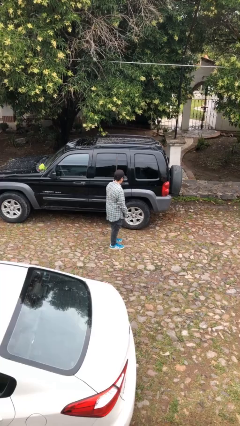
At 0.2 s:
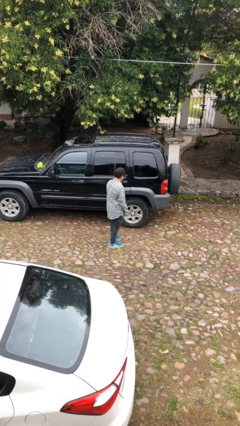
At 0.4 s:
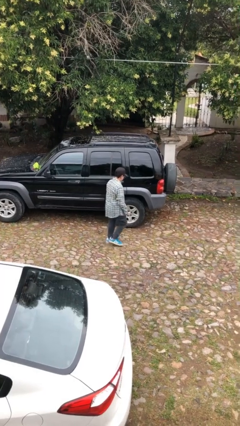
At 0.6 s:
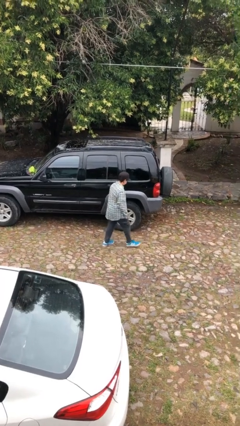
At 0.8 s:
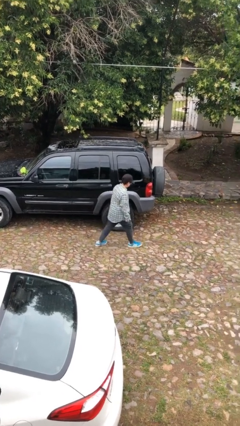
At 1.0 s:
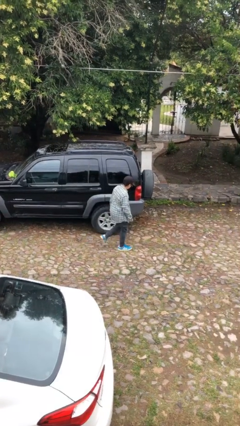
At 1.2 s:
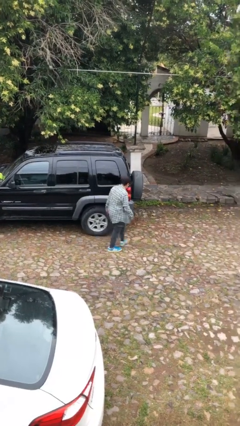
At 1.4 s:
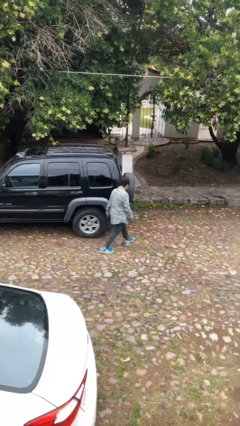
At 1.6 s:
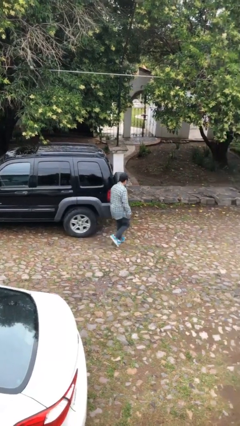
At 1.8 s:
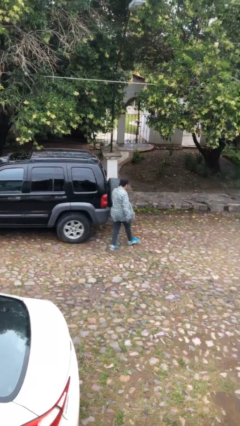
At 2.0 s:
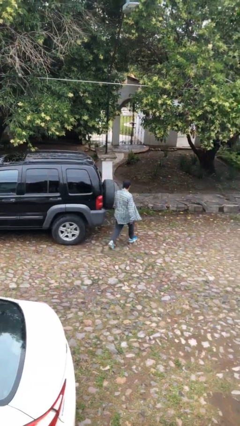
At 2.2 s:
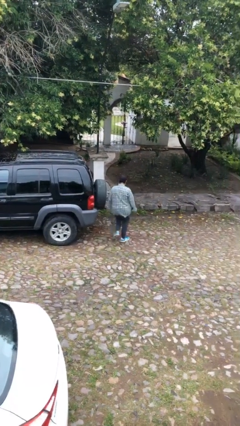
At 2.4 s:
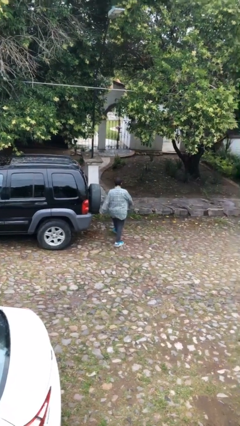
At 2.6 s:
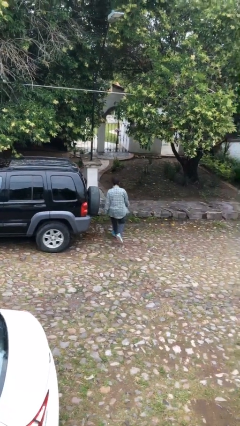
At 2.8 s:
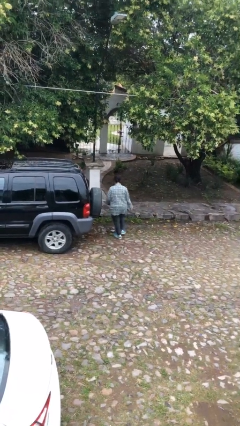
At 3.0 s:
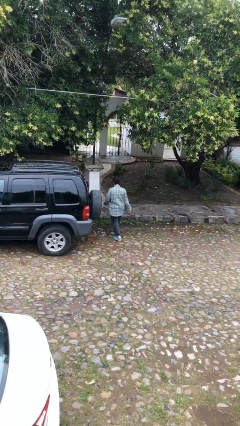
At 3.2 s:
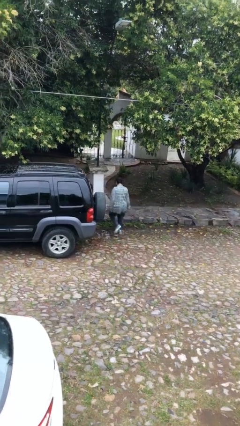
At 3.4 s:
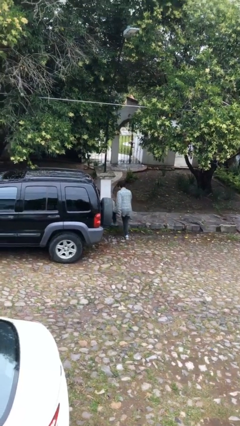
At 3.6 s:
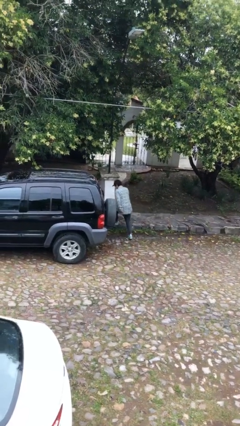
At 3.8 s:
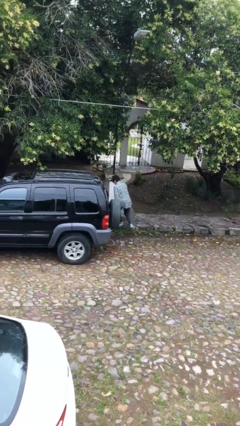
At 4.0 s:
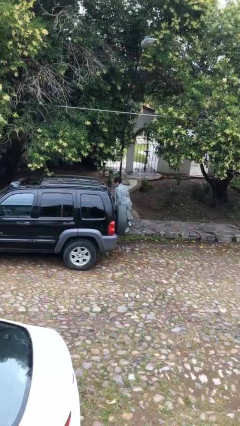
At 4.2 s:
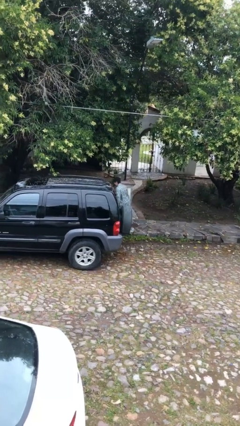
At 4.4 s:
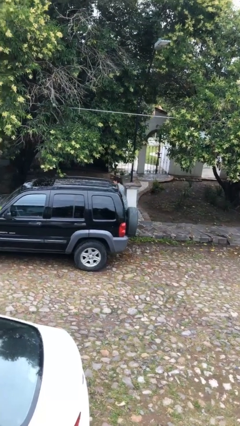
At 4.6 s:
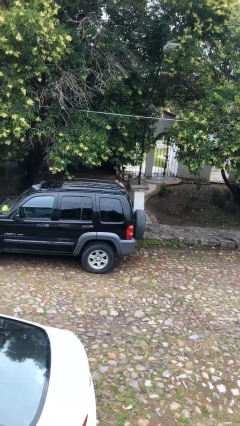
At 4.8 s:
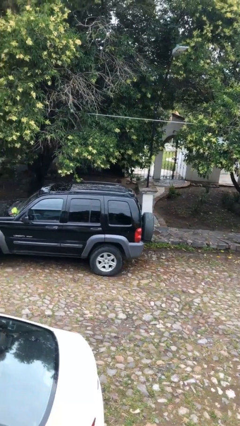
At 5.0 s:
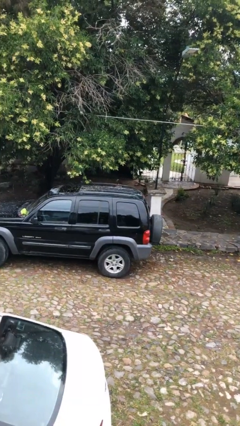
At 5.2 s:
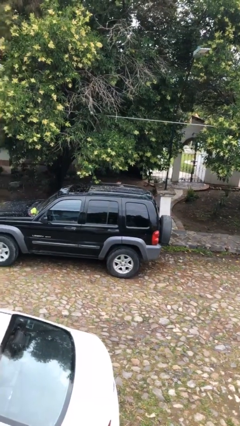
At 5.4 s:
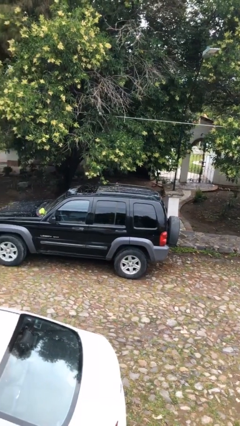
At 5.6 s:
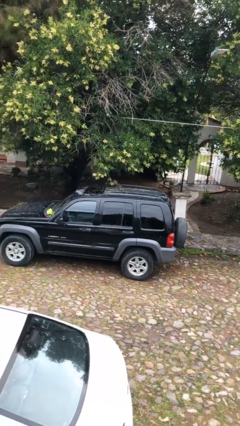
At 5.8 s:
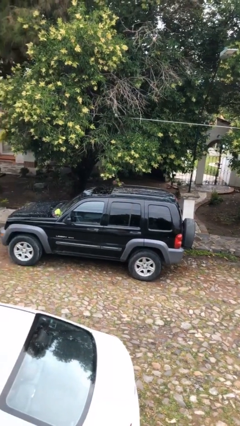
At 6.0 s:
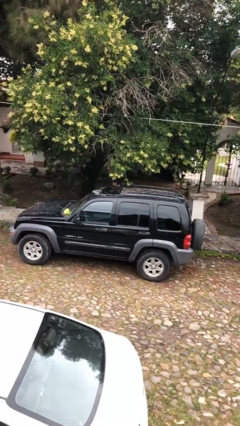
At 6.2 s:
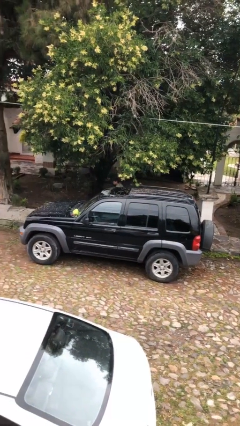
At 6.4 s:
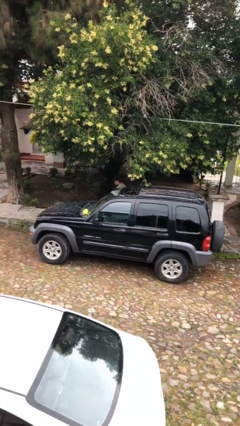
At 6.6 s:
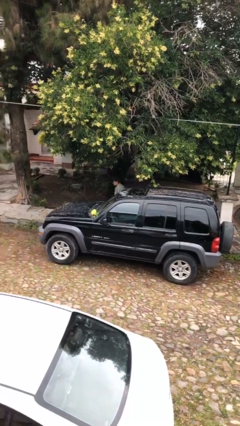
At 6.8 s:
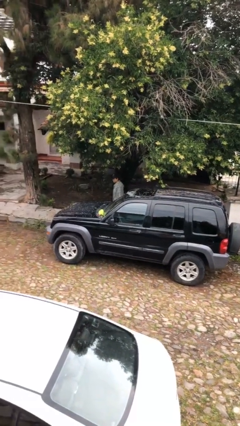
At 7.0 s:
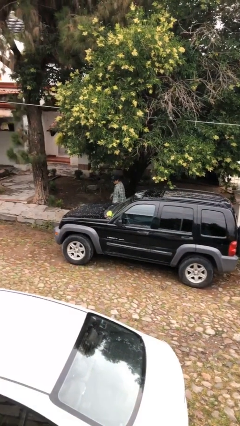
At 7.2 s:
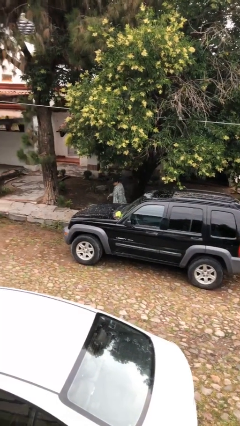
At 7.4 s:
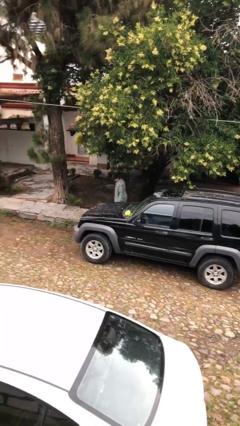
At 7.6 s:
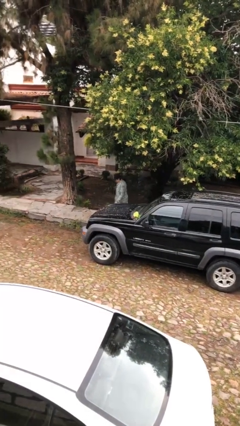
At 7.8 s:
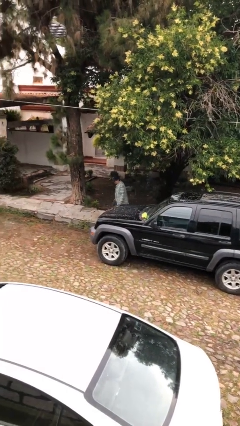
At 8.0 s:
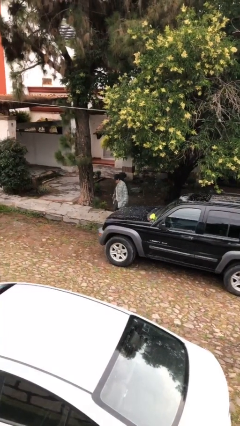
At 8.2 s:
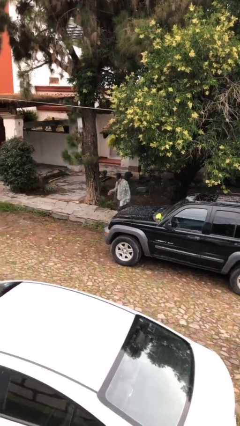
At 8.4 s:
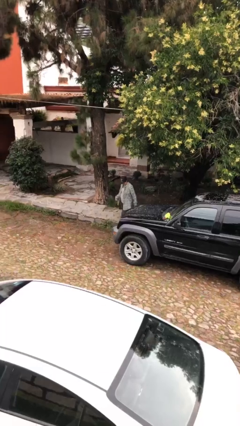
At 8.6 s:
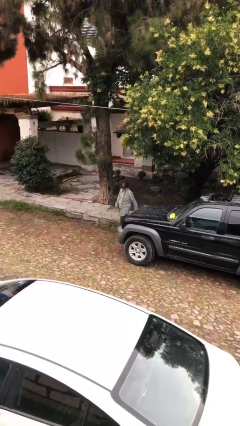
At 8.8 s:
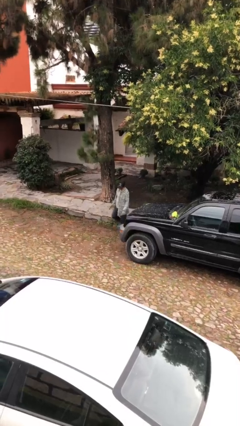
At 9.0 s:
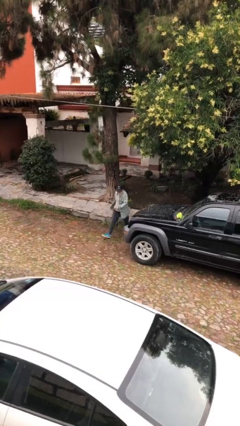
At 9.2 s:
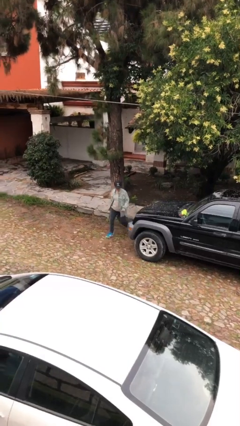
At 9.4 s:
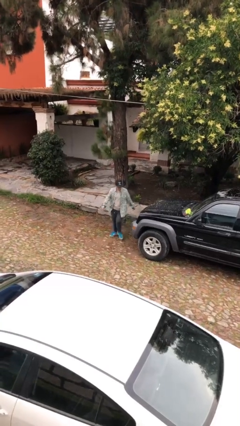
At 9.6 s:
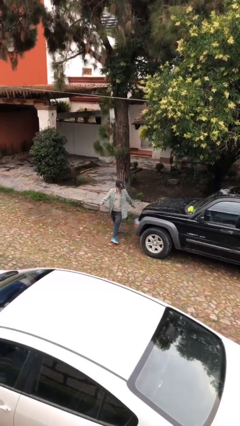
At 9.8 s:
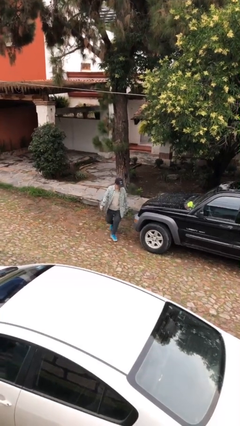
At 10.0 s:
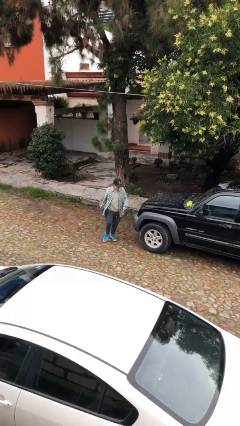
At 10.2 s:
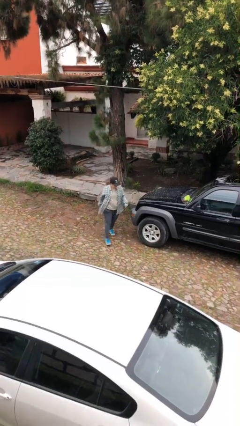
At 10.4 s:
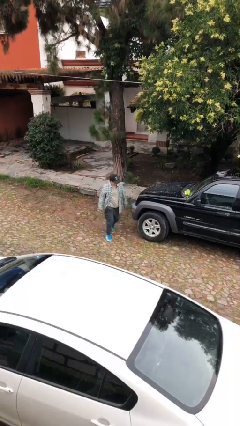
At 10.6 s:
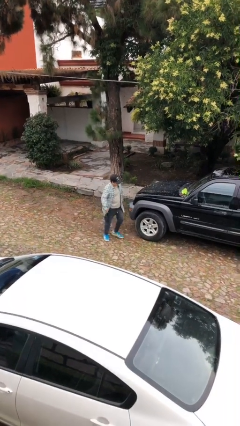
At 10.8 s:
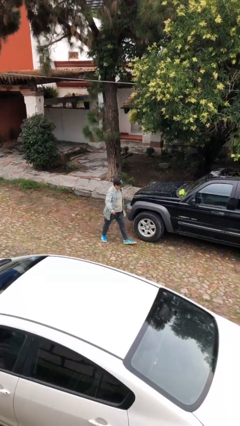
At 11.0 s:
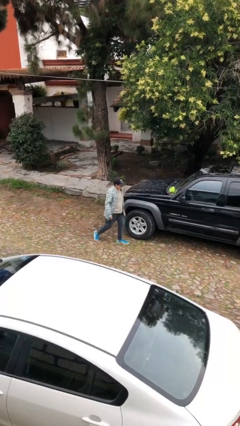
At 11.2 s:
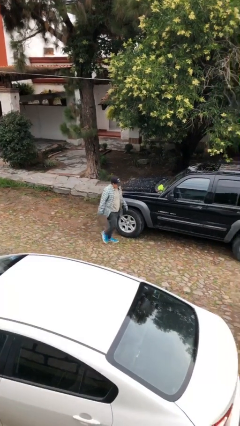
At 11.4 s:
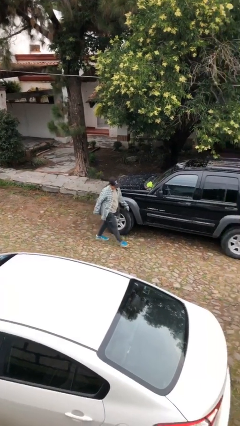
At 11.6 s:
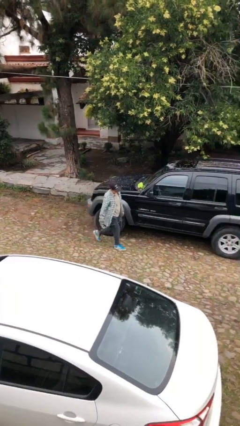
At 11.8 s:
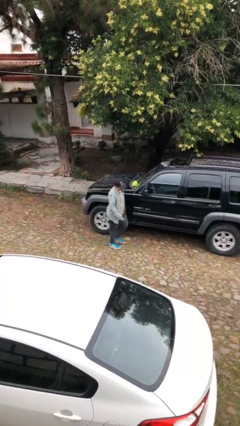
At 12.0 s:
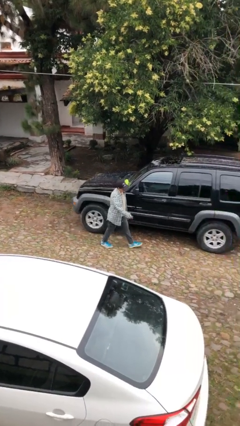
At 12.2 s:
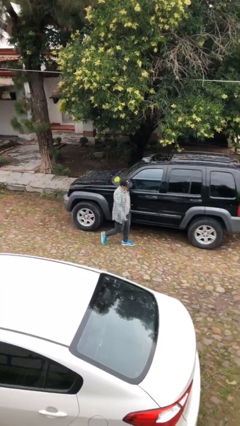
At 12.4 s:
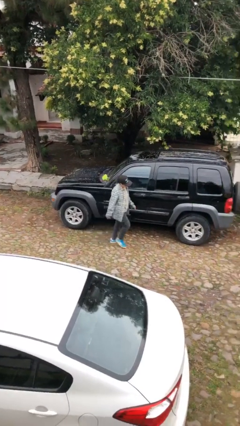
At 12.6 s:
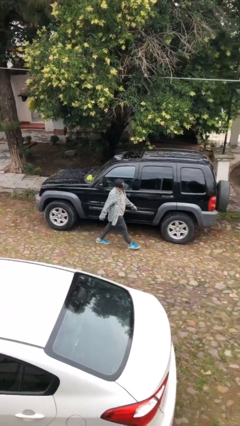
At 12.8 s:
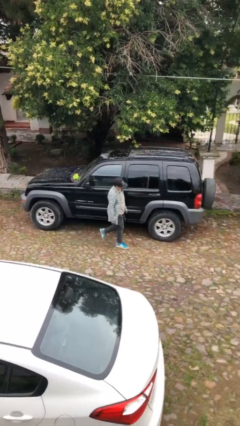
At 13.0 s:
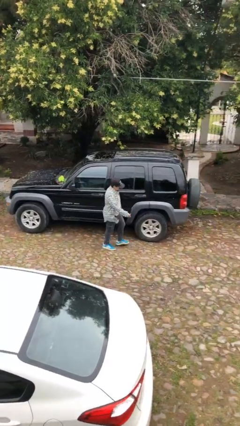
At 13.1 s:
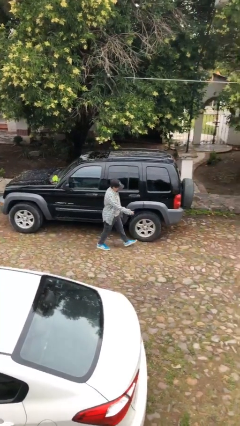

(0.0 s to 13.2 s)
person walks around car

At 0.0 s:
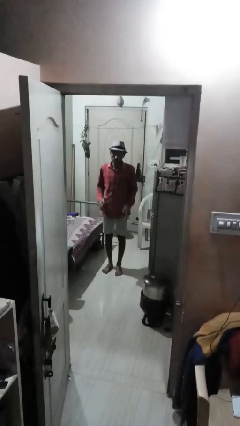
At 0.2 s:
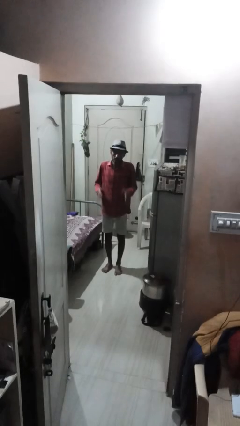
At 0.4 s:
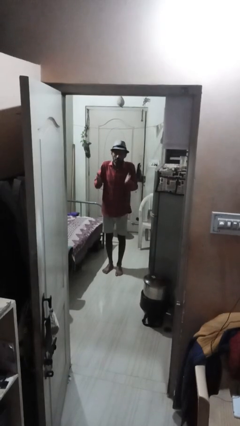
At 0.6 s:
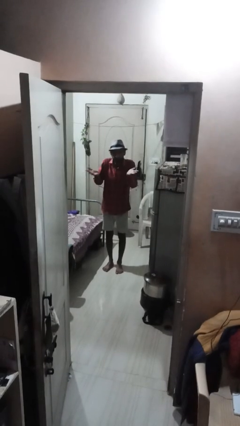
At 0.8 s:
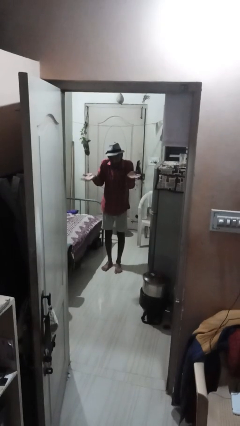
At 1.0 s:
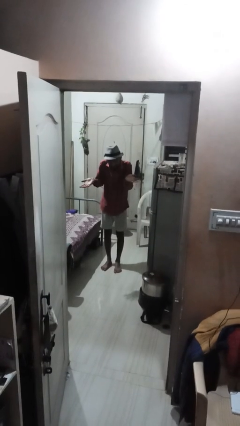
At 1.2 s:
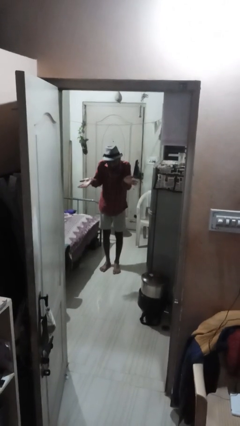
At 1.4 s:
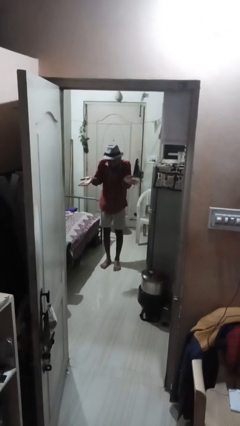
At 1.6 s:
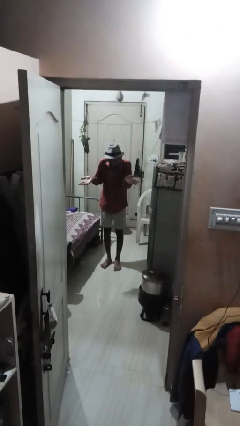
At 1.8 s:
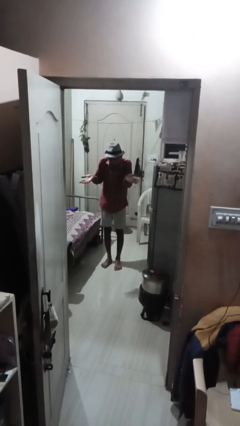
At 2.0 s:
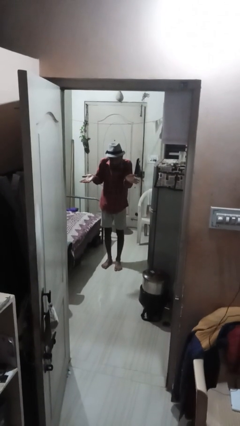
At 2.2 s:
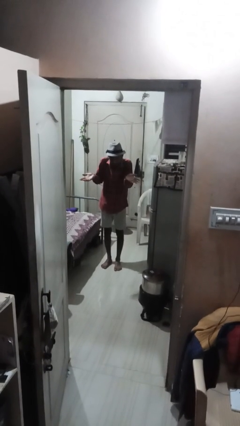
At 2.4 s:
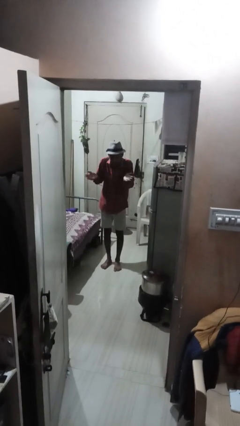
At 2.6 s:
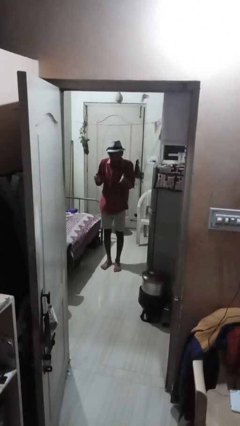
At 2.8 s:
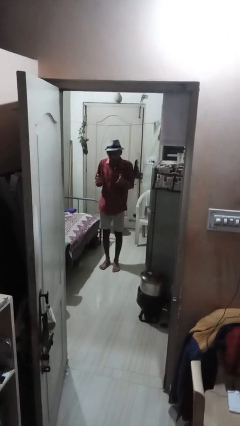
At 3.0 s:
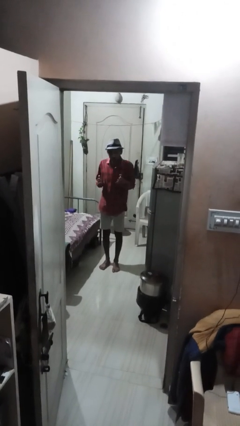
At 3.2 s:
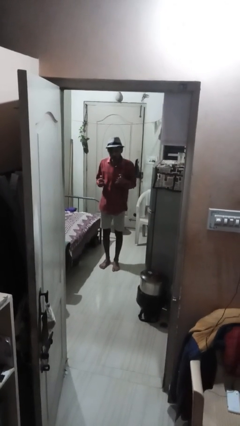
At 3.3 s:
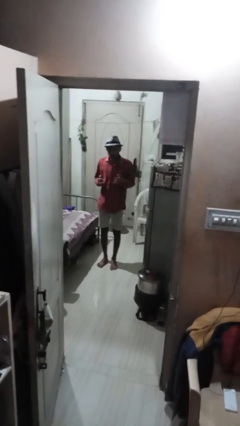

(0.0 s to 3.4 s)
person shrugs

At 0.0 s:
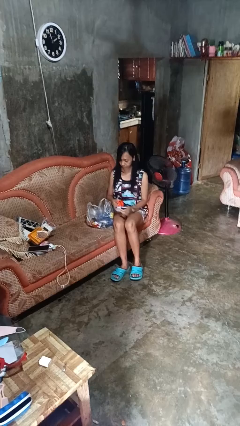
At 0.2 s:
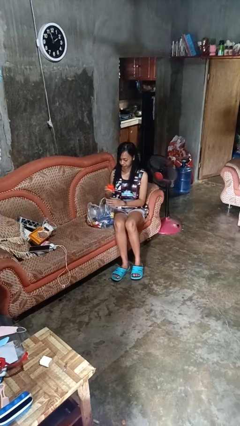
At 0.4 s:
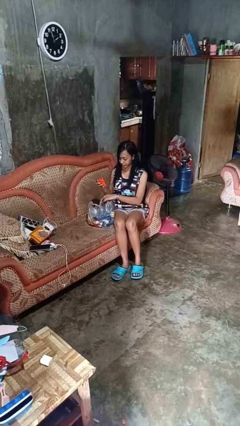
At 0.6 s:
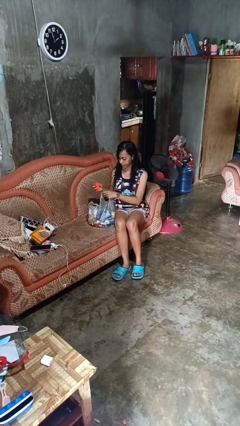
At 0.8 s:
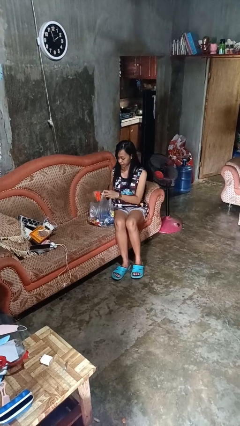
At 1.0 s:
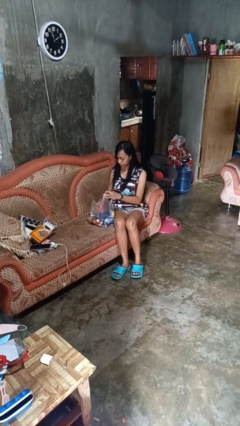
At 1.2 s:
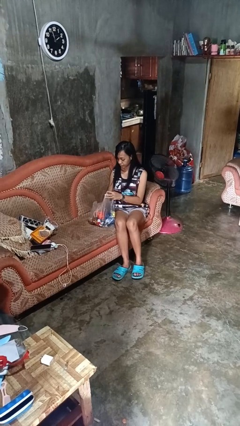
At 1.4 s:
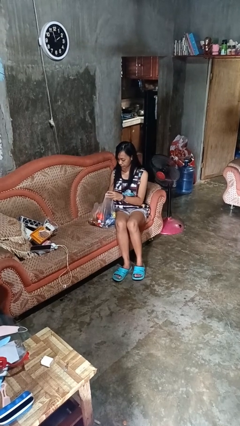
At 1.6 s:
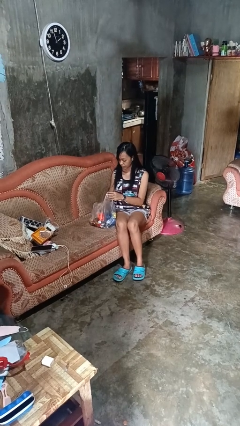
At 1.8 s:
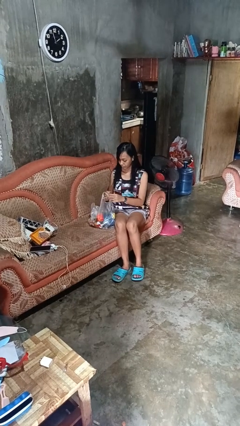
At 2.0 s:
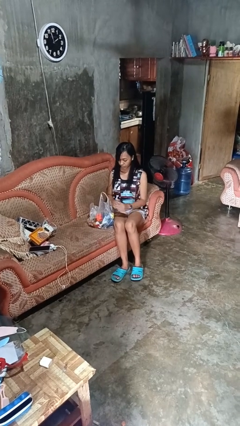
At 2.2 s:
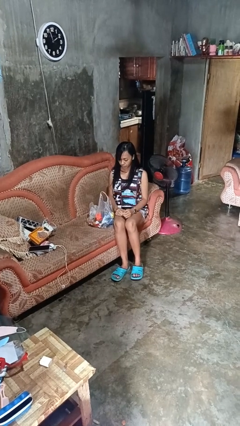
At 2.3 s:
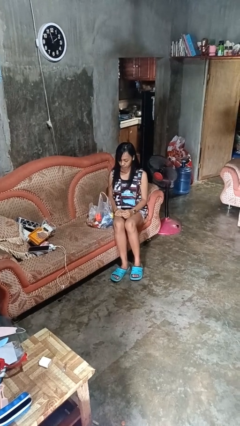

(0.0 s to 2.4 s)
person puts object into bag
